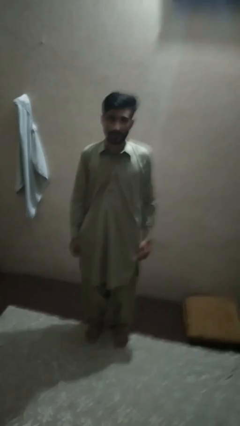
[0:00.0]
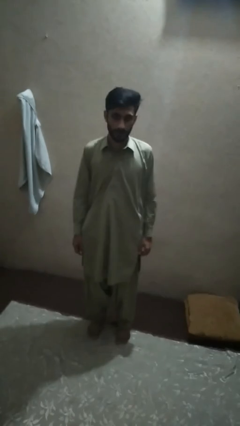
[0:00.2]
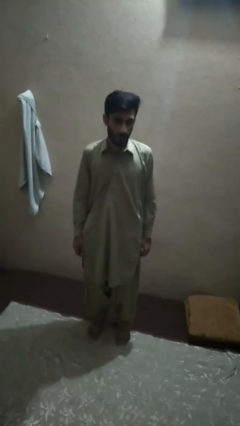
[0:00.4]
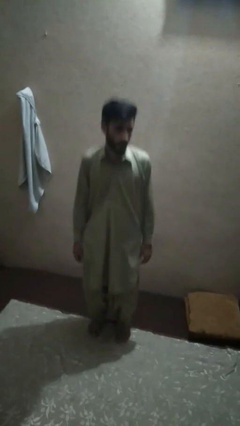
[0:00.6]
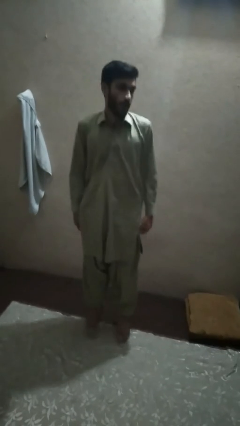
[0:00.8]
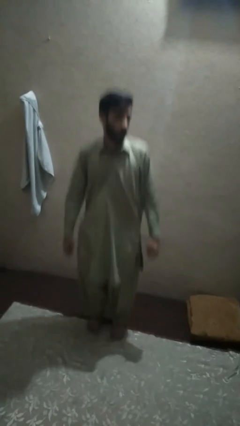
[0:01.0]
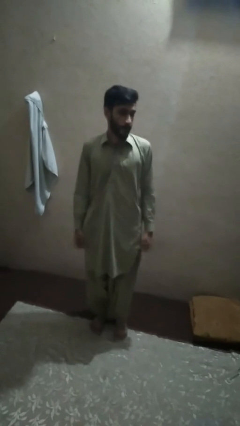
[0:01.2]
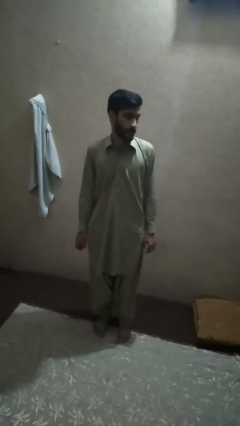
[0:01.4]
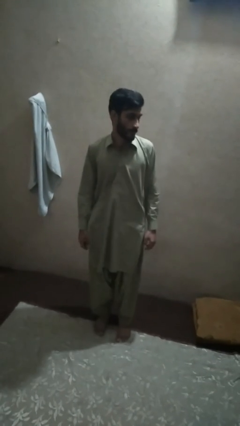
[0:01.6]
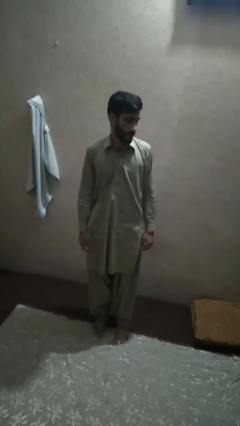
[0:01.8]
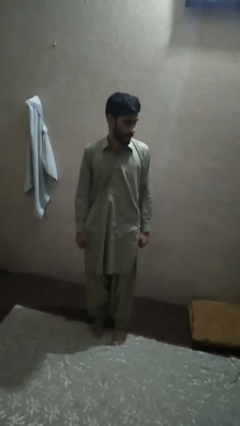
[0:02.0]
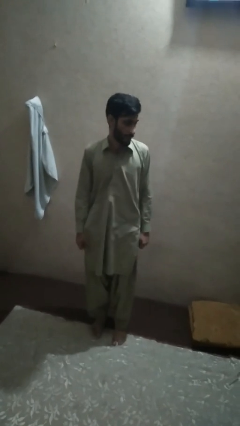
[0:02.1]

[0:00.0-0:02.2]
person jumps

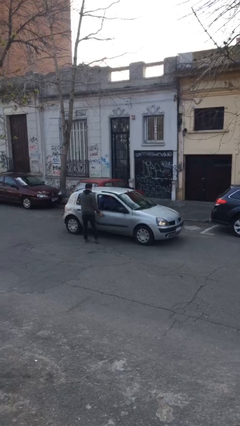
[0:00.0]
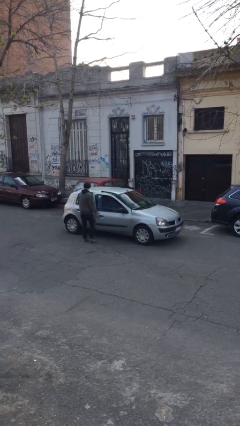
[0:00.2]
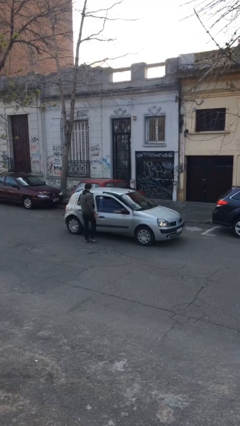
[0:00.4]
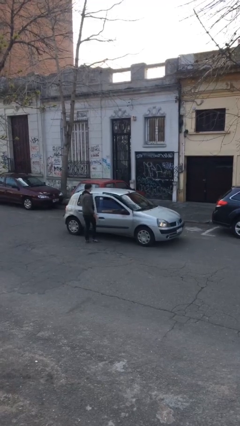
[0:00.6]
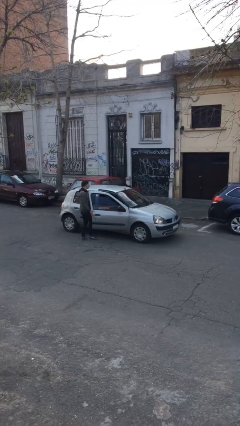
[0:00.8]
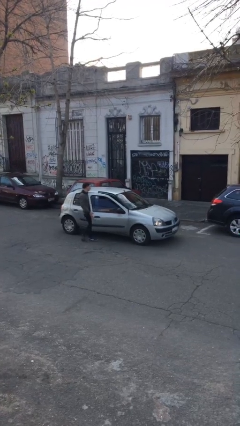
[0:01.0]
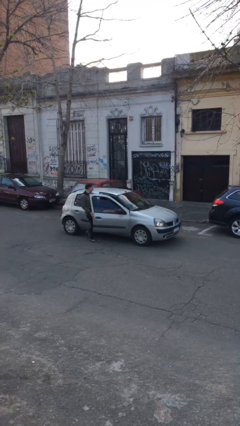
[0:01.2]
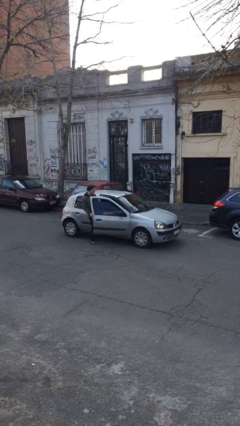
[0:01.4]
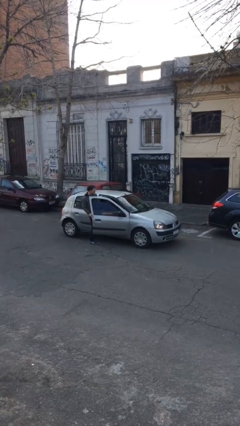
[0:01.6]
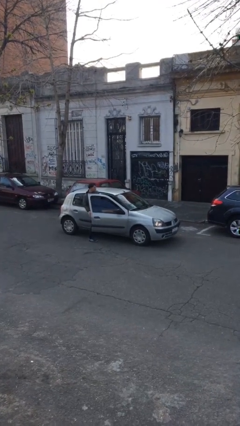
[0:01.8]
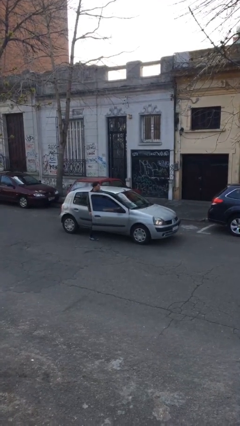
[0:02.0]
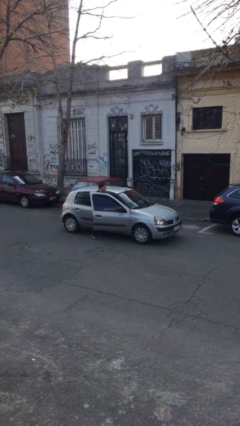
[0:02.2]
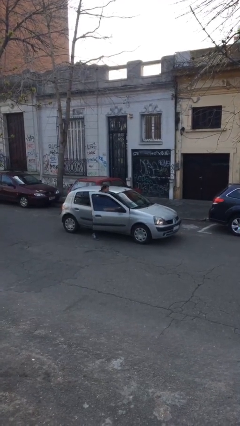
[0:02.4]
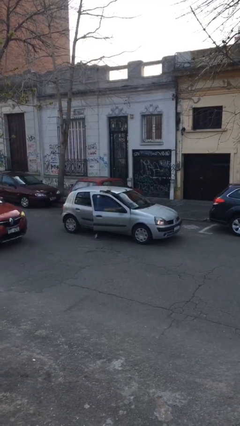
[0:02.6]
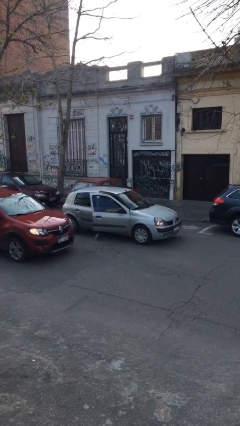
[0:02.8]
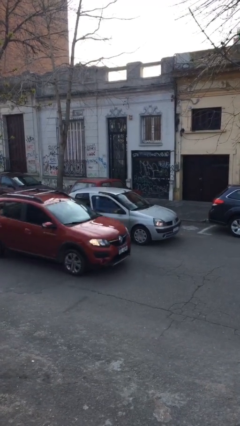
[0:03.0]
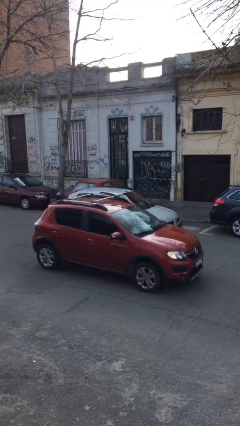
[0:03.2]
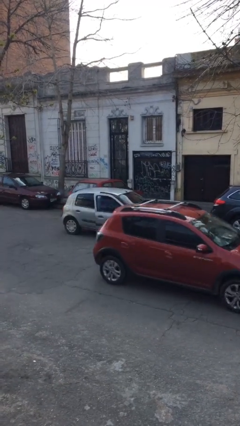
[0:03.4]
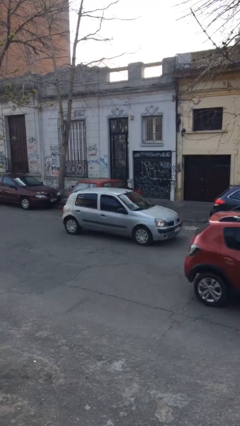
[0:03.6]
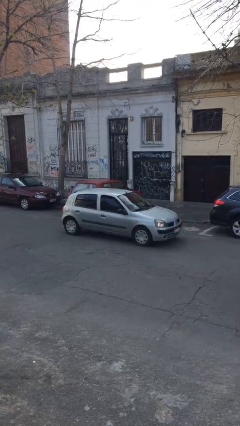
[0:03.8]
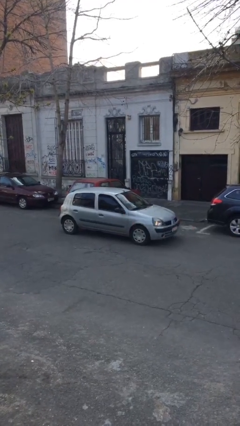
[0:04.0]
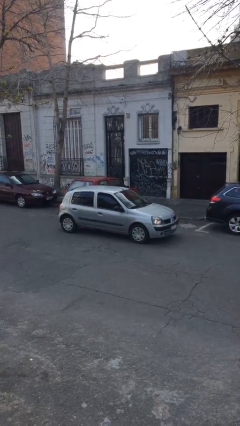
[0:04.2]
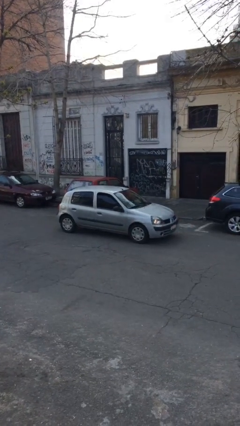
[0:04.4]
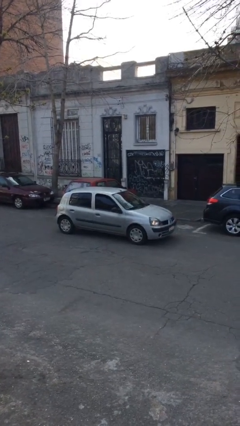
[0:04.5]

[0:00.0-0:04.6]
car picks up person

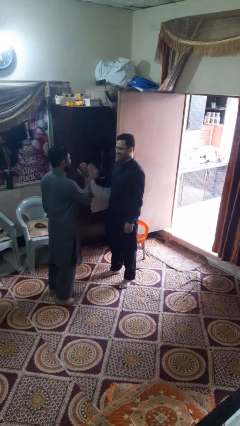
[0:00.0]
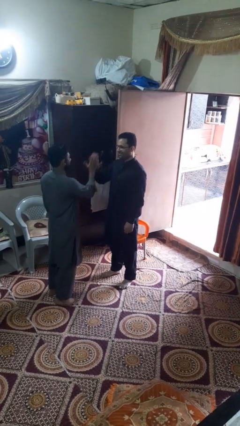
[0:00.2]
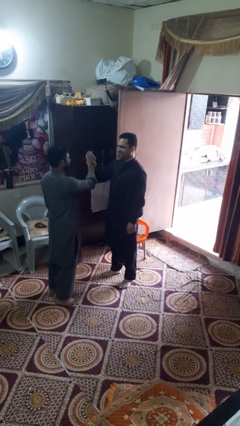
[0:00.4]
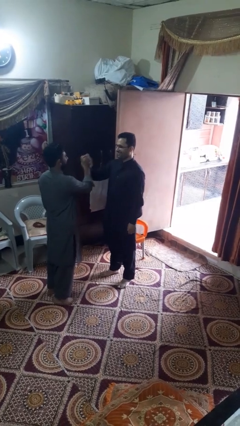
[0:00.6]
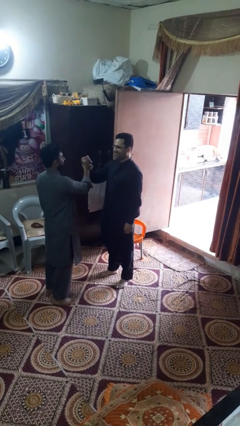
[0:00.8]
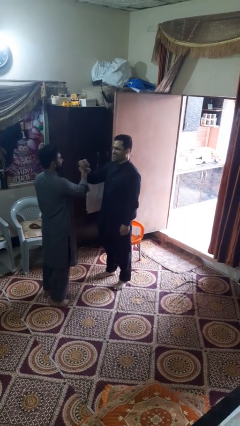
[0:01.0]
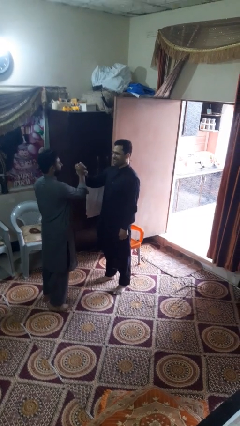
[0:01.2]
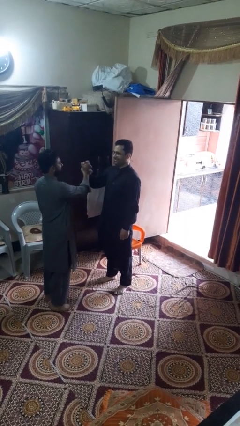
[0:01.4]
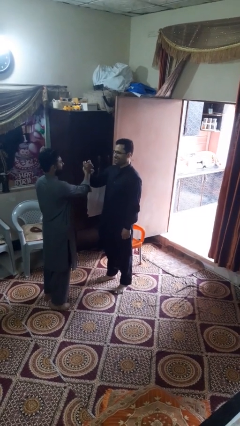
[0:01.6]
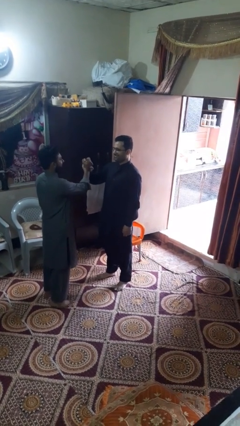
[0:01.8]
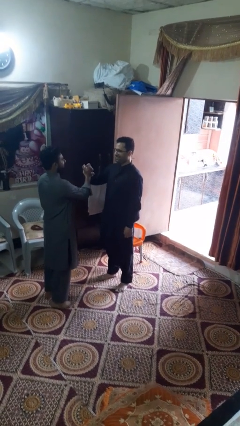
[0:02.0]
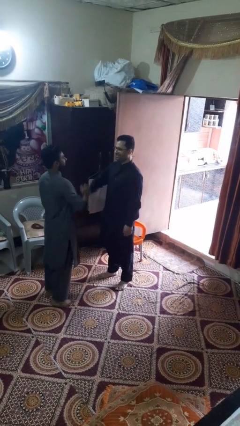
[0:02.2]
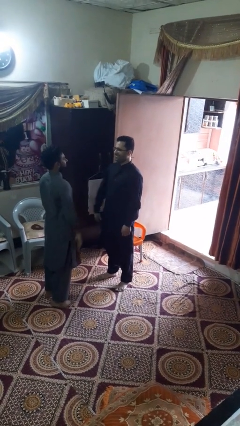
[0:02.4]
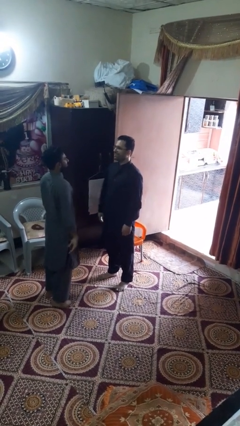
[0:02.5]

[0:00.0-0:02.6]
person highfives hand

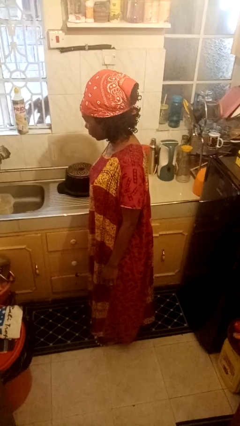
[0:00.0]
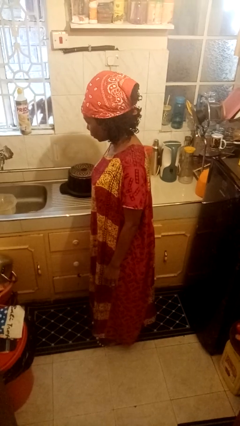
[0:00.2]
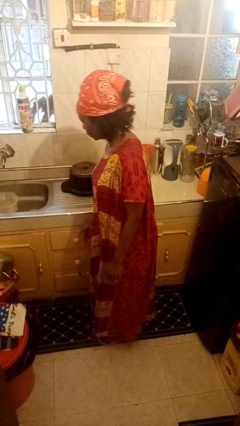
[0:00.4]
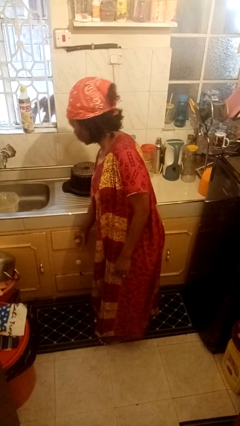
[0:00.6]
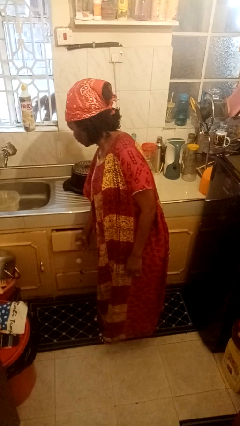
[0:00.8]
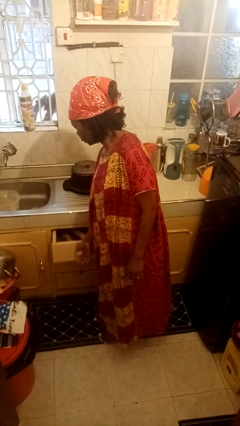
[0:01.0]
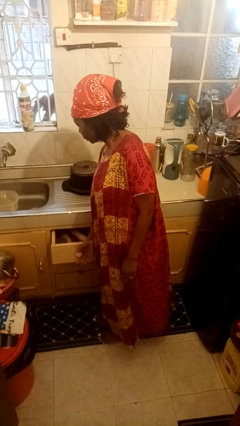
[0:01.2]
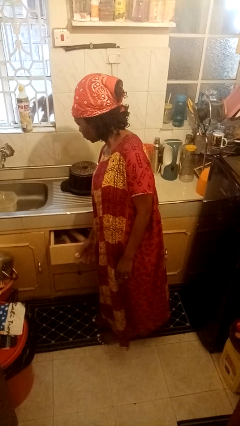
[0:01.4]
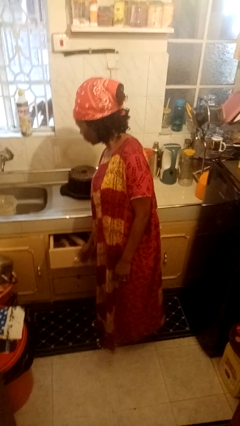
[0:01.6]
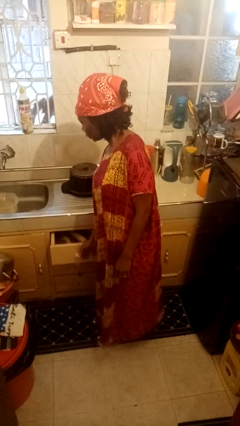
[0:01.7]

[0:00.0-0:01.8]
person opens kitchen drawer

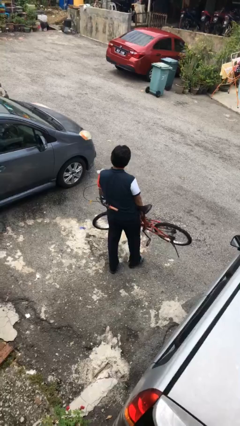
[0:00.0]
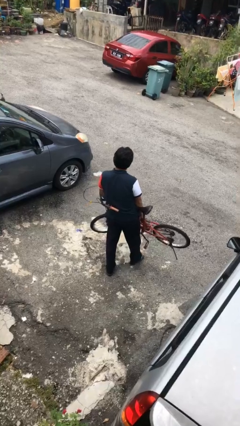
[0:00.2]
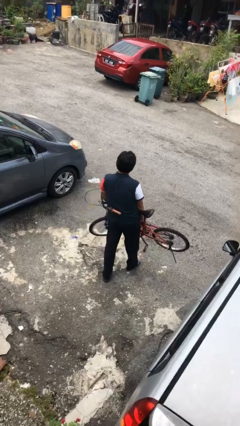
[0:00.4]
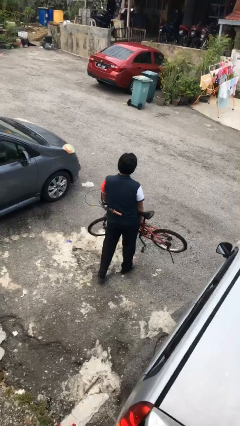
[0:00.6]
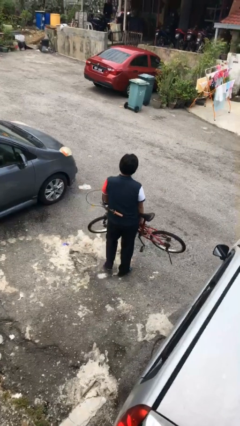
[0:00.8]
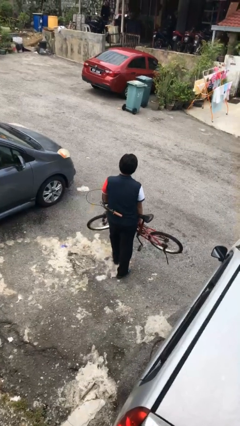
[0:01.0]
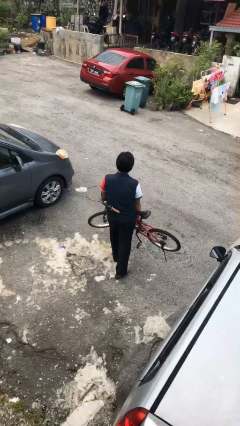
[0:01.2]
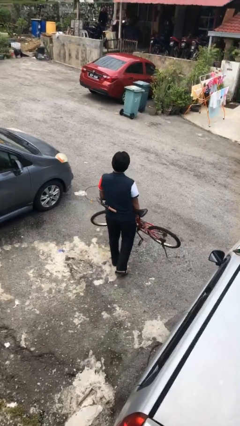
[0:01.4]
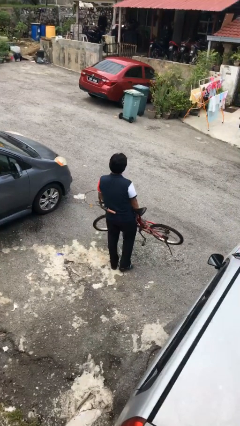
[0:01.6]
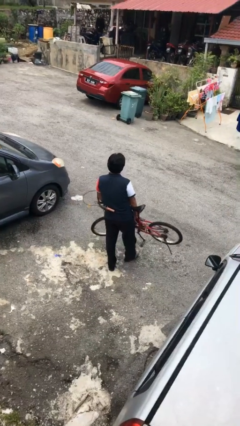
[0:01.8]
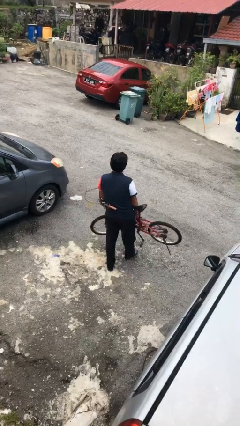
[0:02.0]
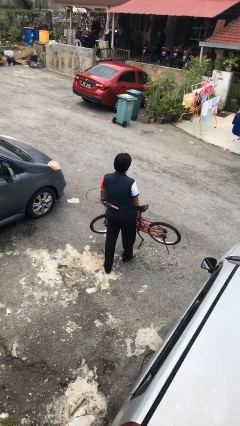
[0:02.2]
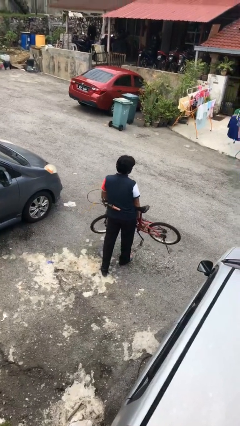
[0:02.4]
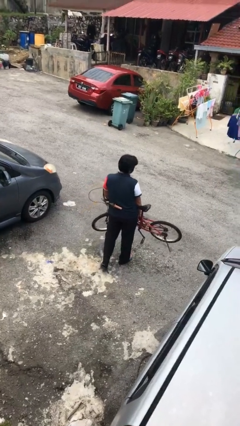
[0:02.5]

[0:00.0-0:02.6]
person carries bicycle

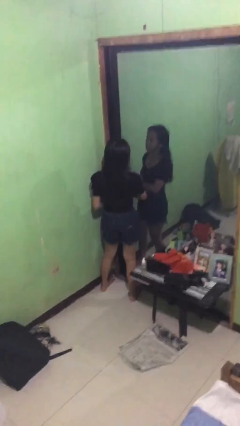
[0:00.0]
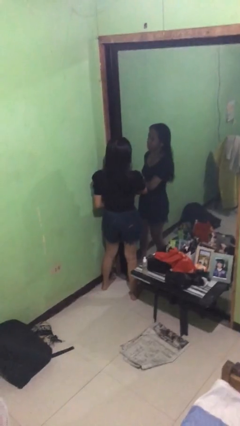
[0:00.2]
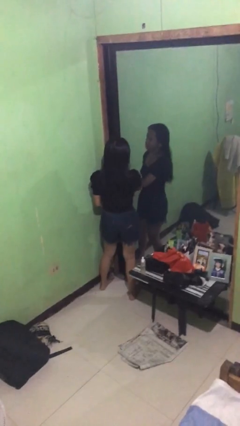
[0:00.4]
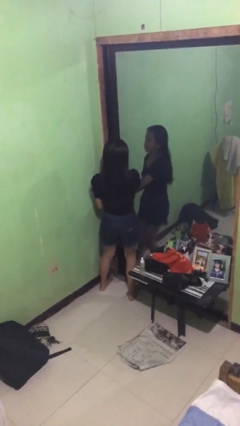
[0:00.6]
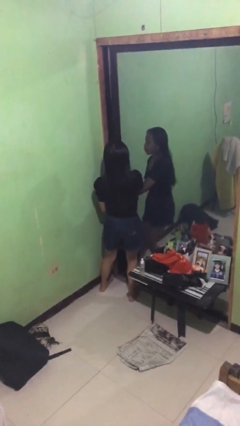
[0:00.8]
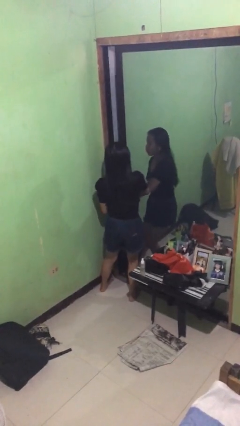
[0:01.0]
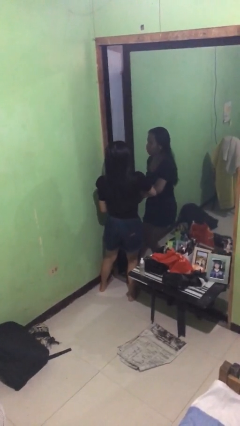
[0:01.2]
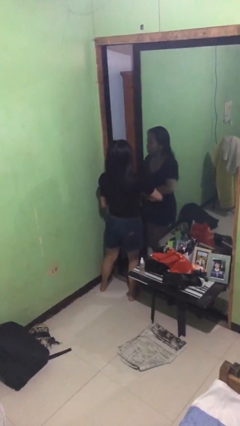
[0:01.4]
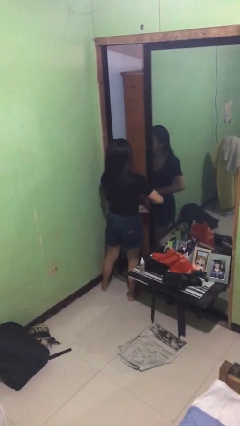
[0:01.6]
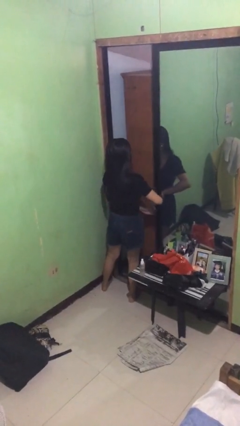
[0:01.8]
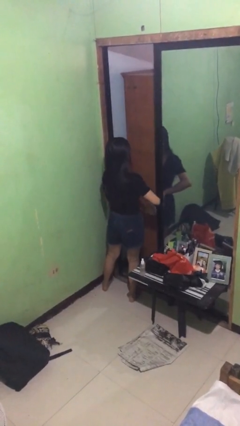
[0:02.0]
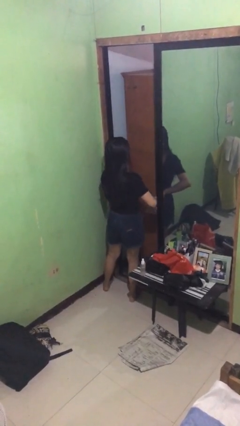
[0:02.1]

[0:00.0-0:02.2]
person opens sliding door

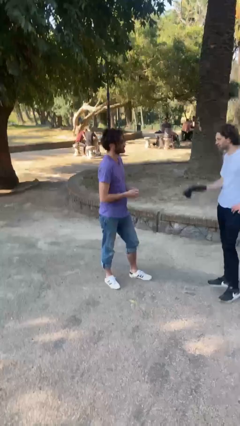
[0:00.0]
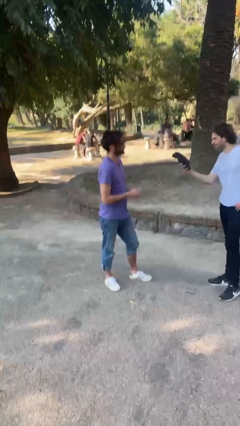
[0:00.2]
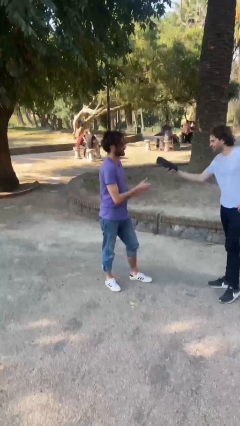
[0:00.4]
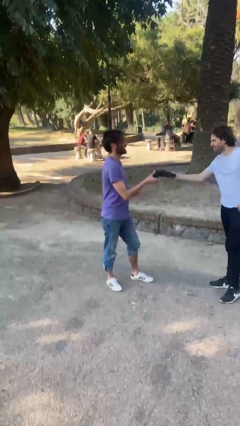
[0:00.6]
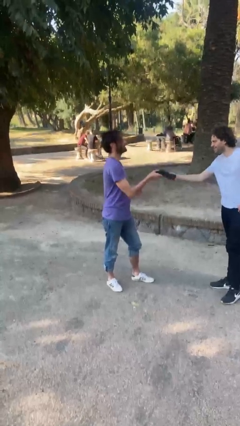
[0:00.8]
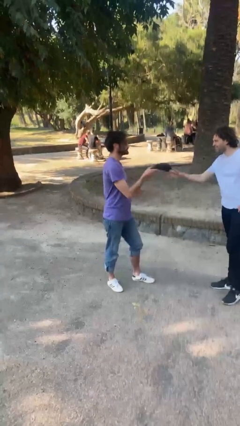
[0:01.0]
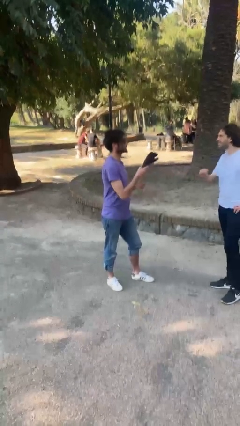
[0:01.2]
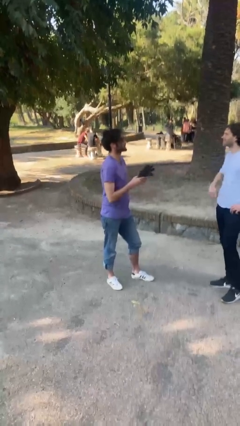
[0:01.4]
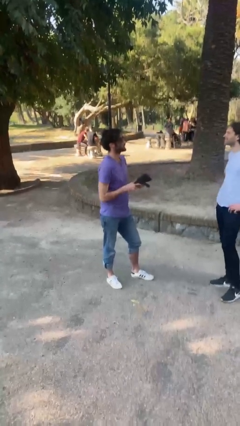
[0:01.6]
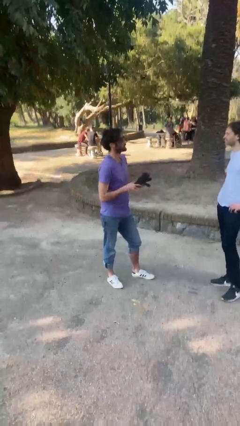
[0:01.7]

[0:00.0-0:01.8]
person transfers object to person
